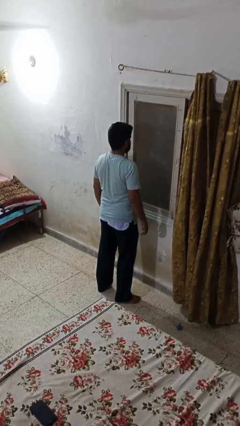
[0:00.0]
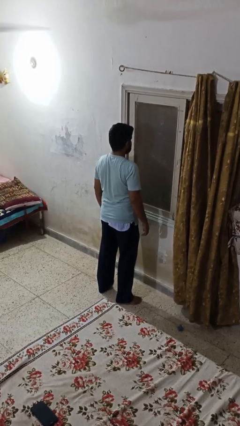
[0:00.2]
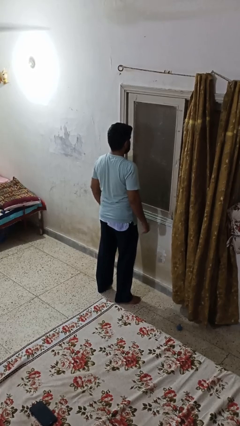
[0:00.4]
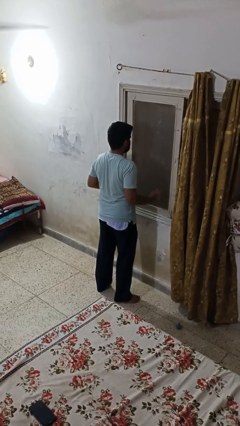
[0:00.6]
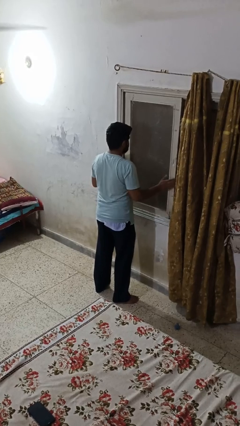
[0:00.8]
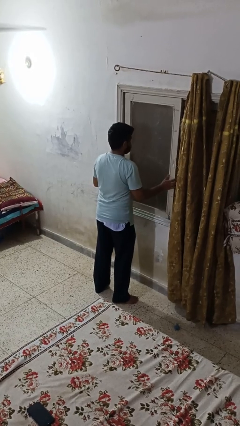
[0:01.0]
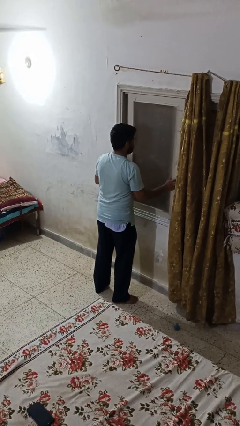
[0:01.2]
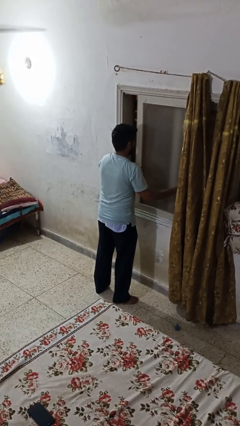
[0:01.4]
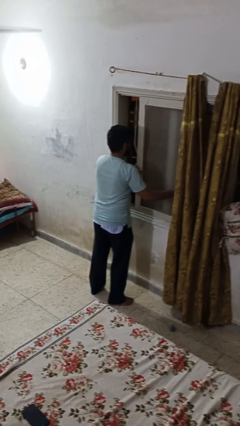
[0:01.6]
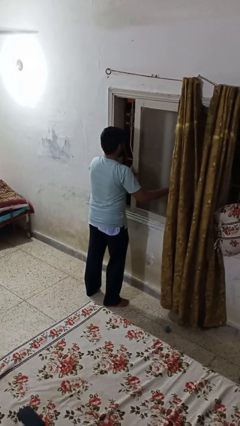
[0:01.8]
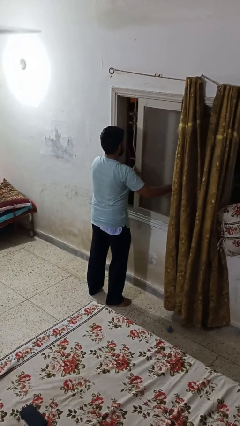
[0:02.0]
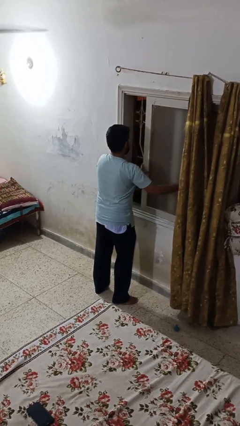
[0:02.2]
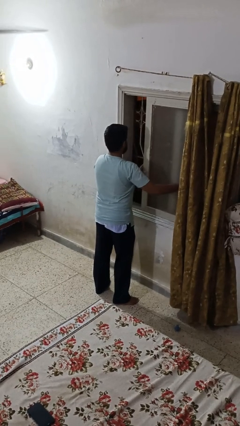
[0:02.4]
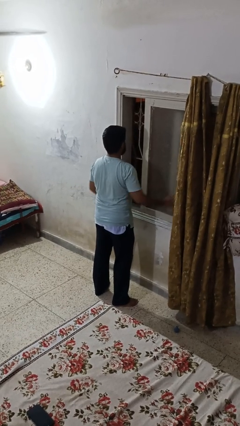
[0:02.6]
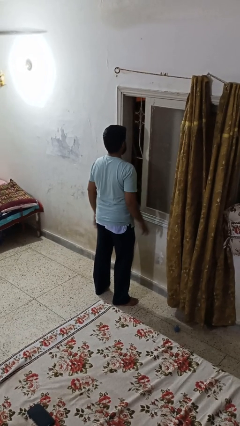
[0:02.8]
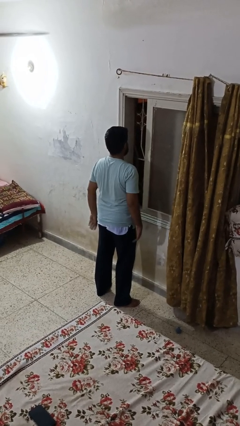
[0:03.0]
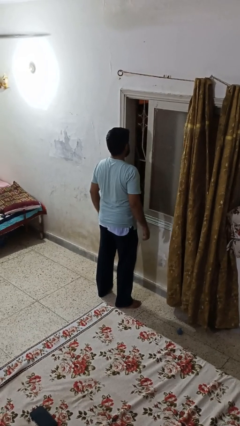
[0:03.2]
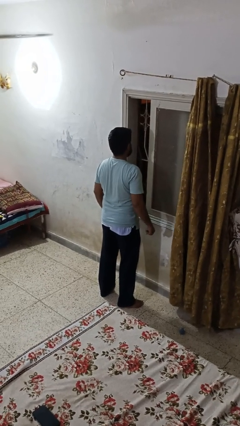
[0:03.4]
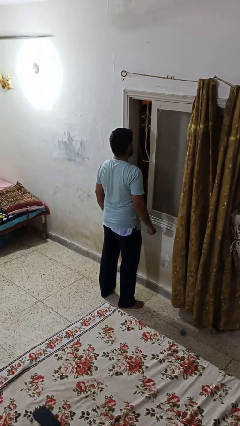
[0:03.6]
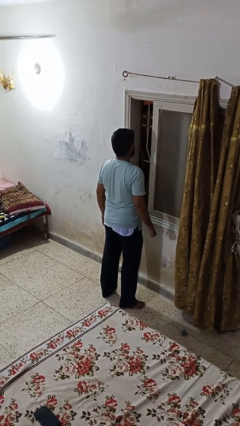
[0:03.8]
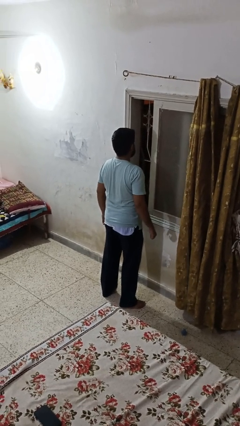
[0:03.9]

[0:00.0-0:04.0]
person opens sliding door

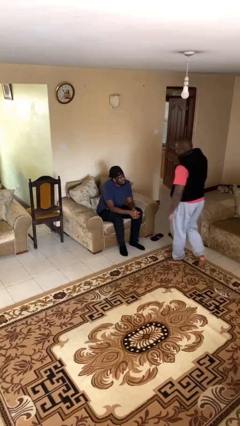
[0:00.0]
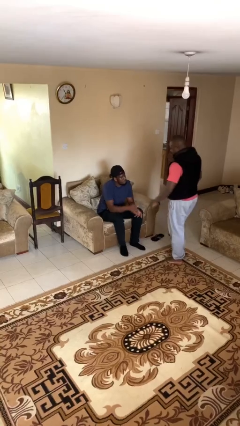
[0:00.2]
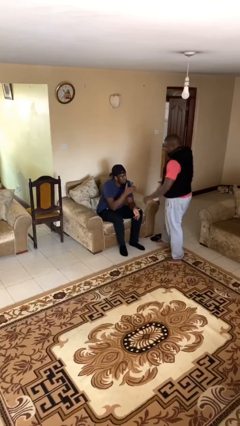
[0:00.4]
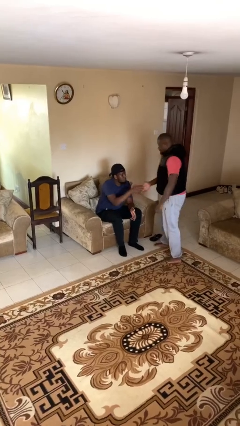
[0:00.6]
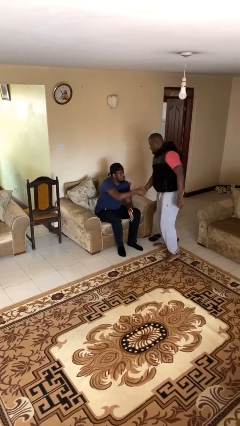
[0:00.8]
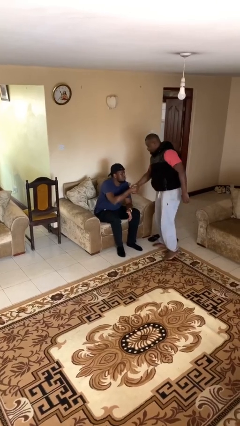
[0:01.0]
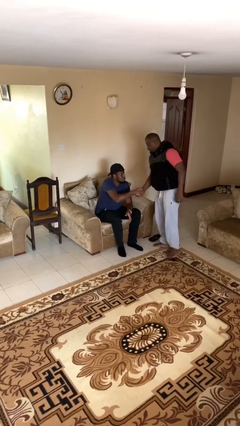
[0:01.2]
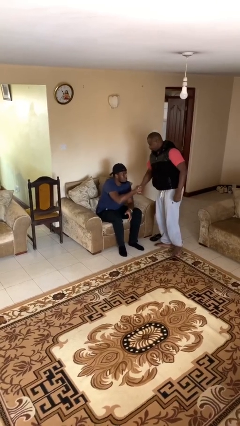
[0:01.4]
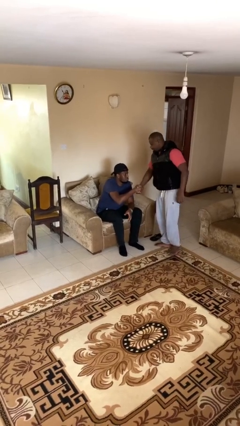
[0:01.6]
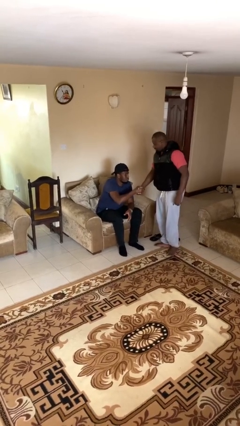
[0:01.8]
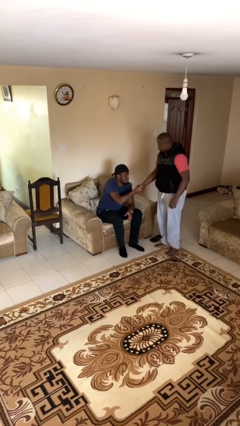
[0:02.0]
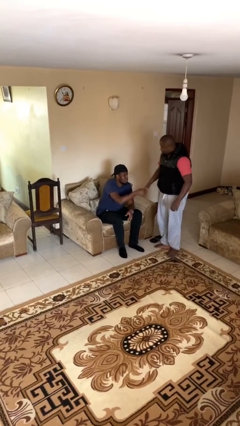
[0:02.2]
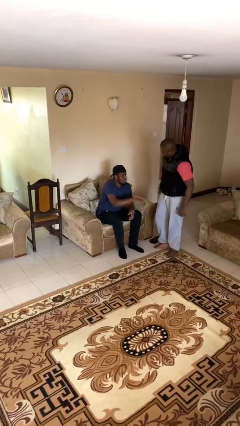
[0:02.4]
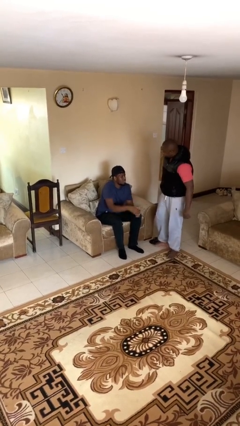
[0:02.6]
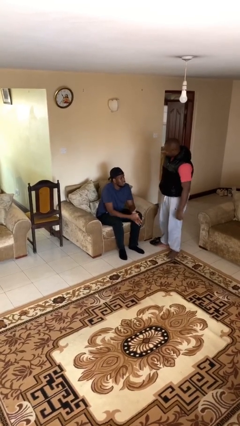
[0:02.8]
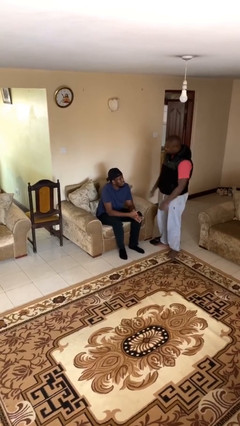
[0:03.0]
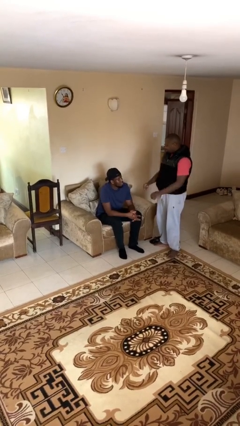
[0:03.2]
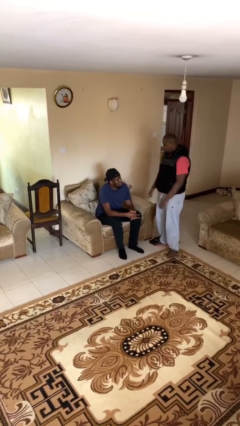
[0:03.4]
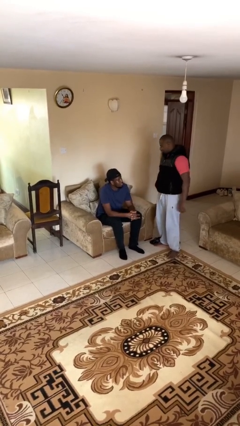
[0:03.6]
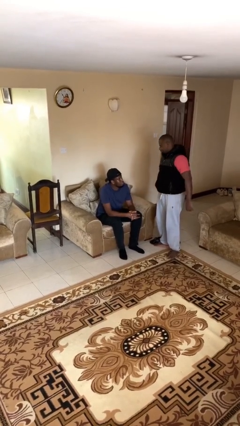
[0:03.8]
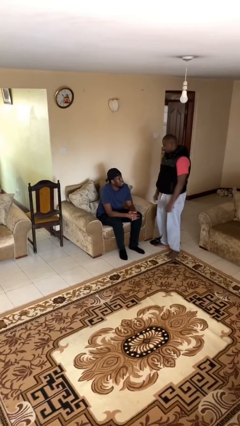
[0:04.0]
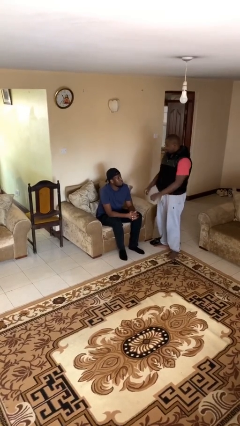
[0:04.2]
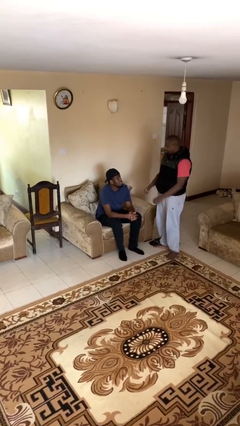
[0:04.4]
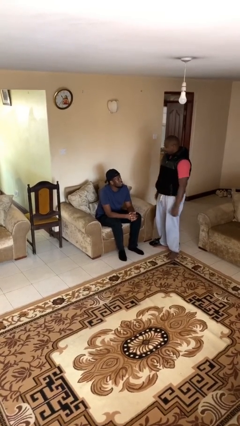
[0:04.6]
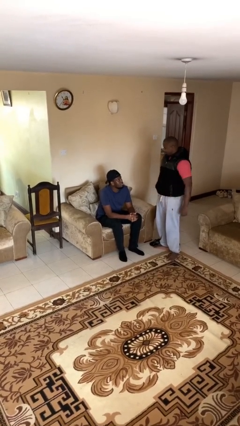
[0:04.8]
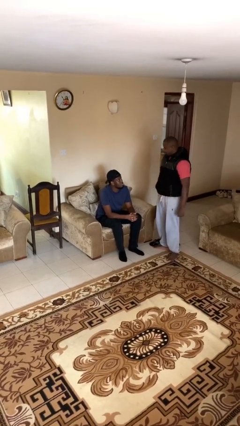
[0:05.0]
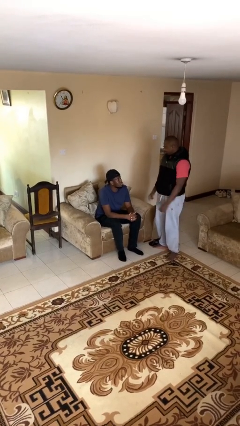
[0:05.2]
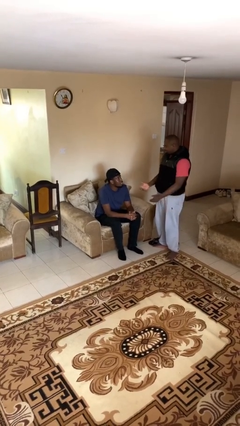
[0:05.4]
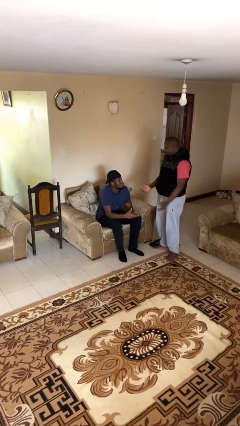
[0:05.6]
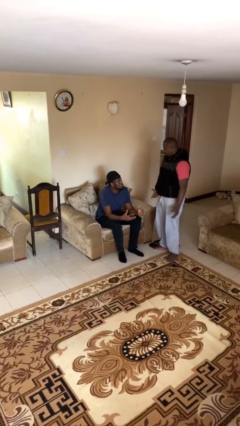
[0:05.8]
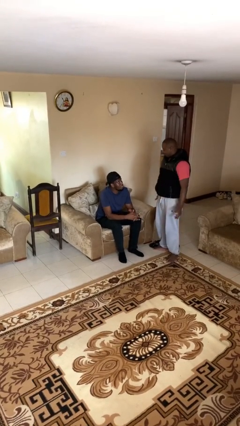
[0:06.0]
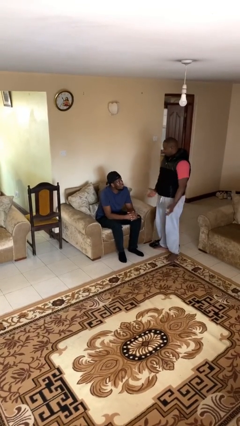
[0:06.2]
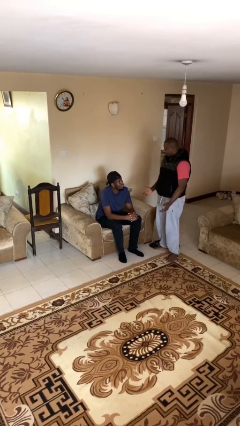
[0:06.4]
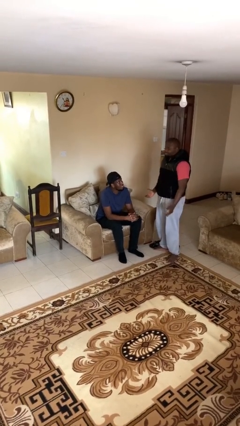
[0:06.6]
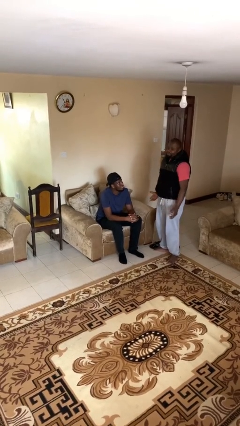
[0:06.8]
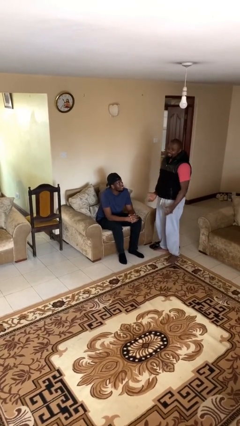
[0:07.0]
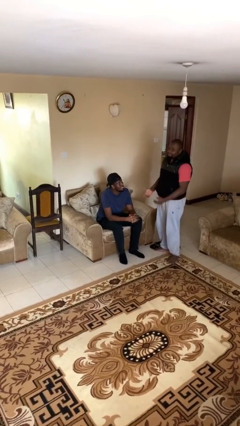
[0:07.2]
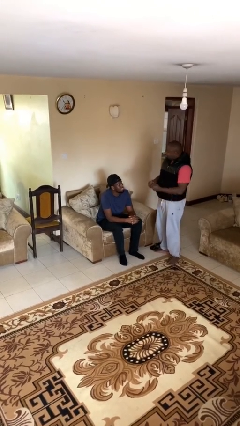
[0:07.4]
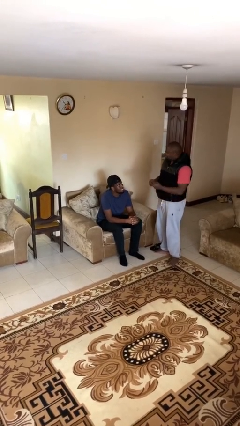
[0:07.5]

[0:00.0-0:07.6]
person shakes hand

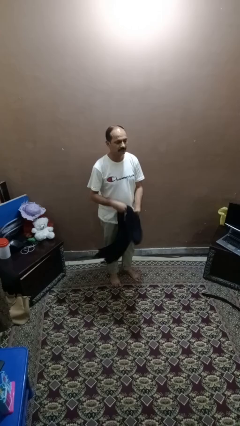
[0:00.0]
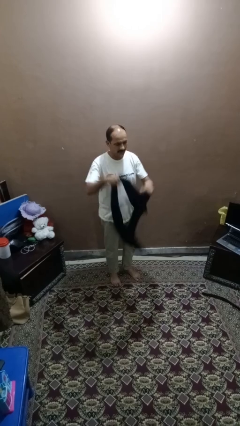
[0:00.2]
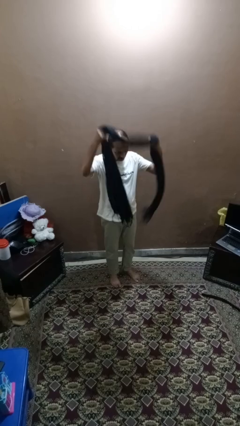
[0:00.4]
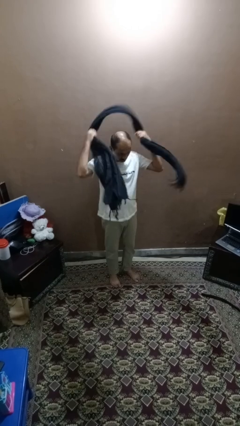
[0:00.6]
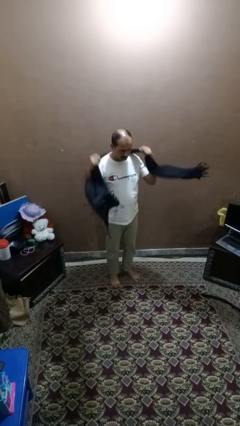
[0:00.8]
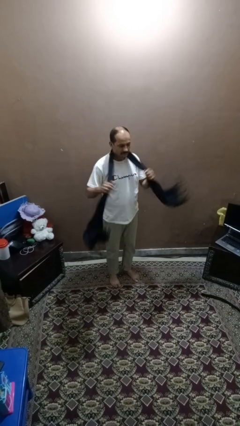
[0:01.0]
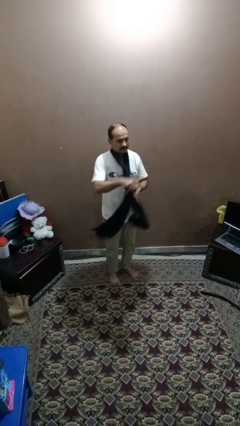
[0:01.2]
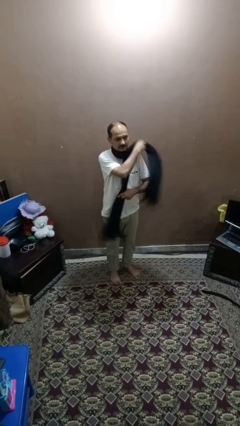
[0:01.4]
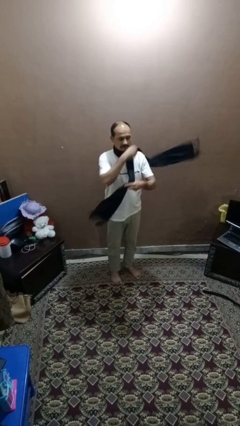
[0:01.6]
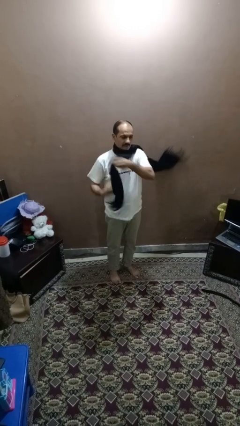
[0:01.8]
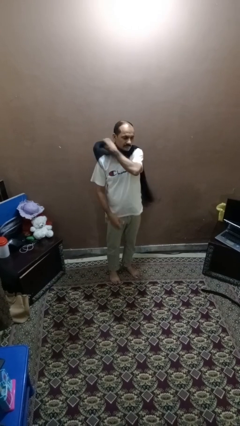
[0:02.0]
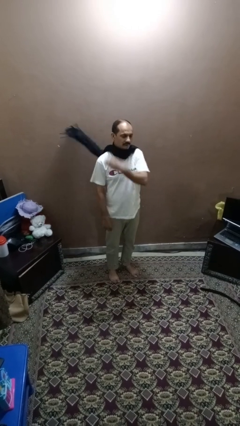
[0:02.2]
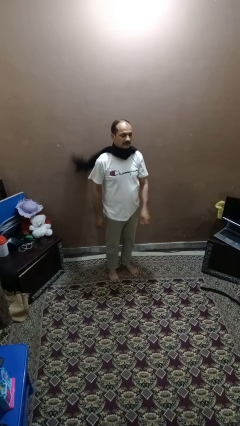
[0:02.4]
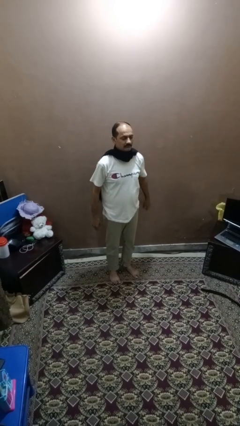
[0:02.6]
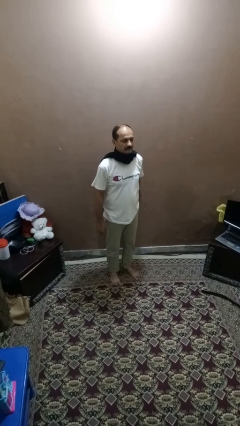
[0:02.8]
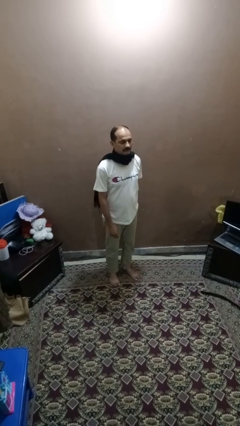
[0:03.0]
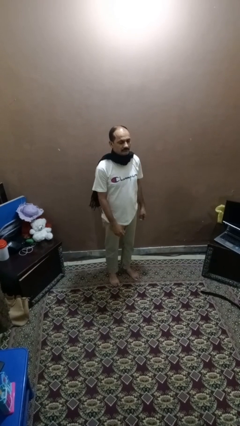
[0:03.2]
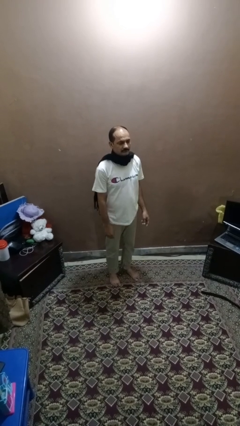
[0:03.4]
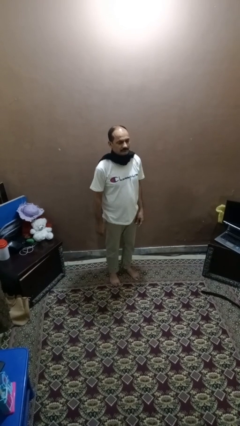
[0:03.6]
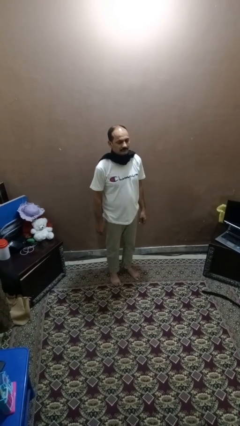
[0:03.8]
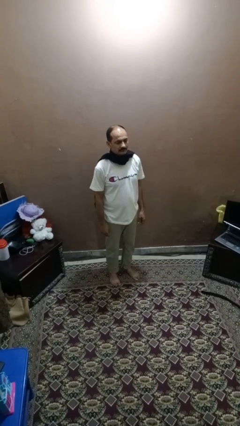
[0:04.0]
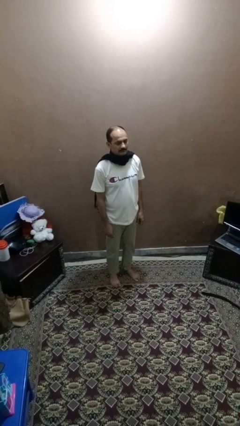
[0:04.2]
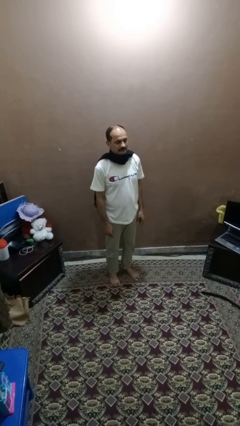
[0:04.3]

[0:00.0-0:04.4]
person puts on scarf

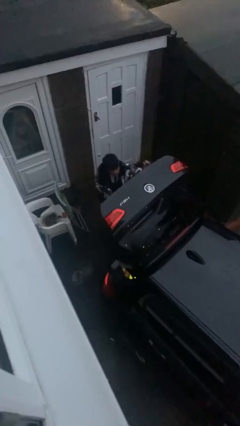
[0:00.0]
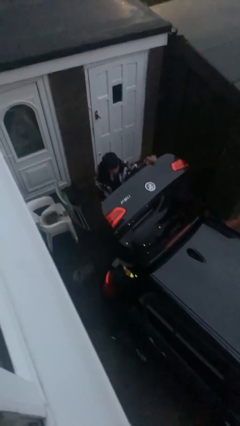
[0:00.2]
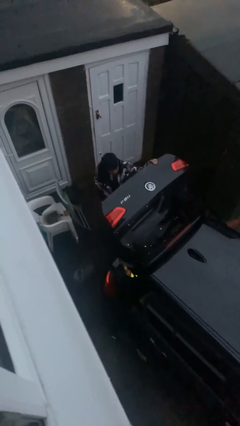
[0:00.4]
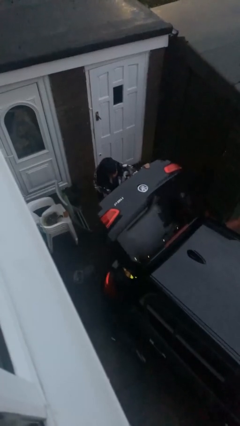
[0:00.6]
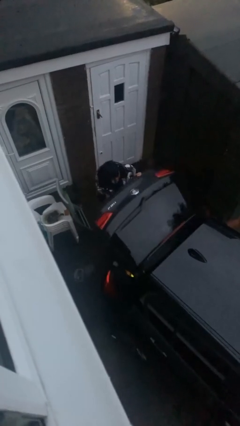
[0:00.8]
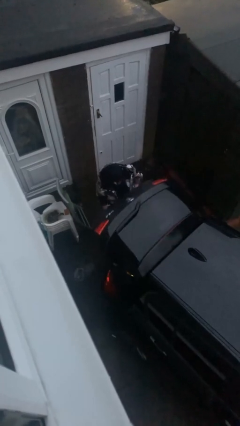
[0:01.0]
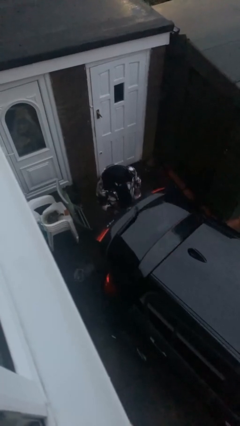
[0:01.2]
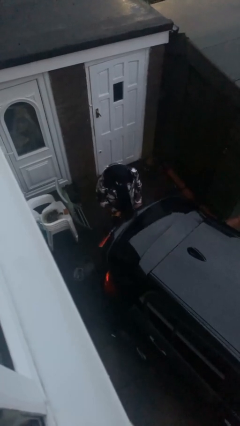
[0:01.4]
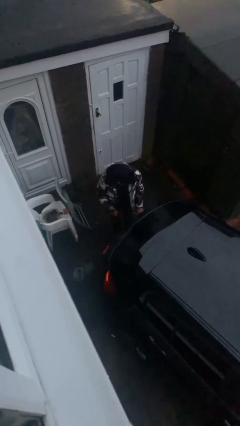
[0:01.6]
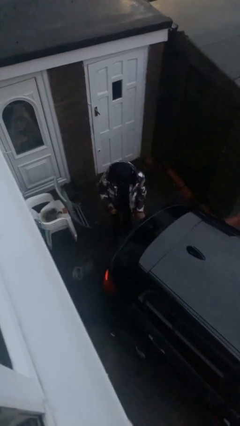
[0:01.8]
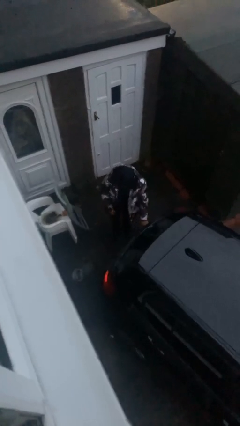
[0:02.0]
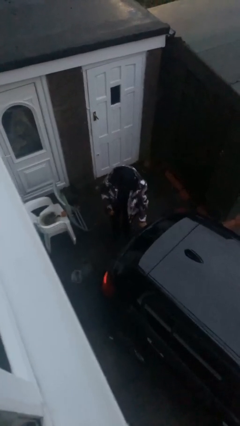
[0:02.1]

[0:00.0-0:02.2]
person closes car trunk
